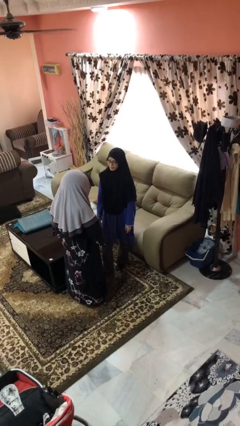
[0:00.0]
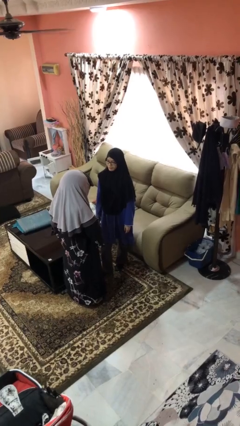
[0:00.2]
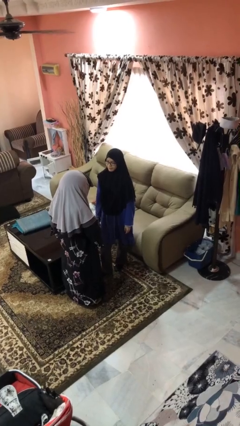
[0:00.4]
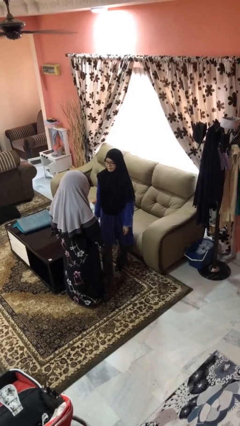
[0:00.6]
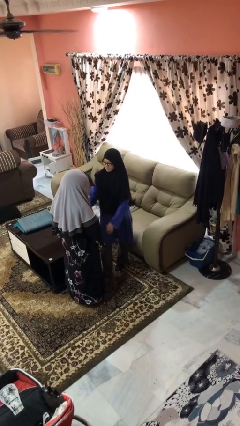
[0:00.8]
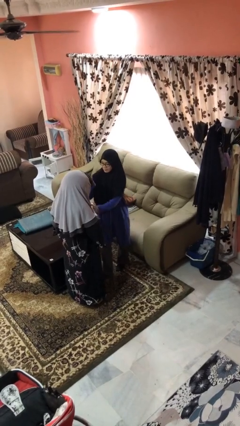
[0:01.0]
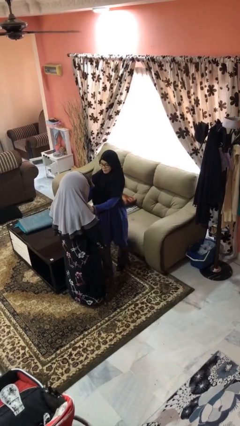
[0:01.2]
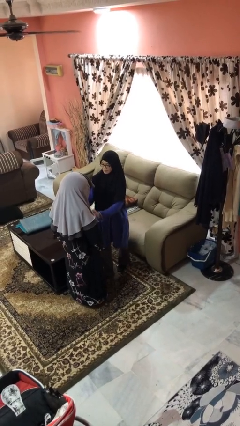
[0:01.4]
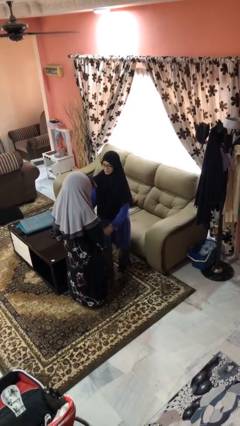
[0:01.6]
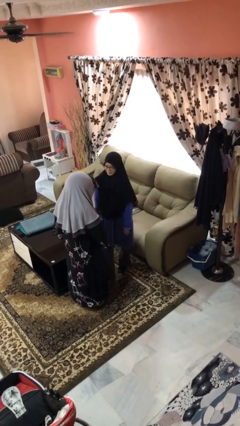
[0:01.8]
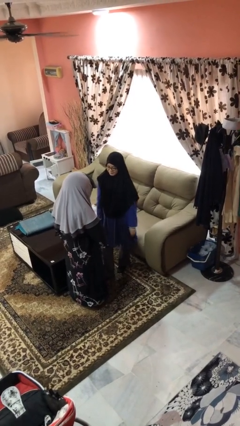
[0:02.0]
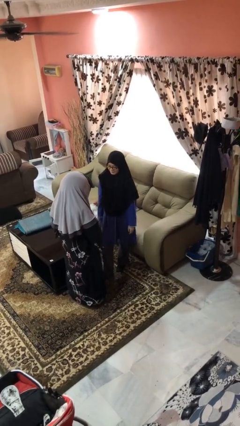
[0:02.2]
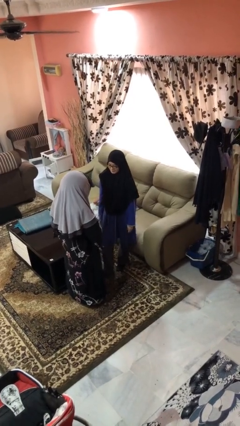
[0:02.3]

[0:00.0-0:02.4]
person shoves person

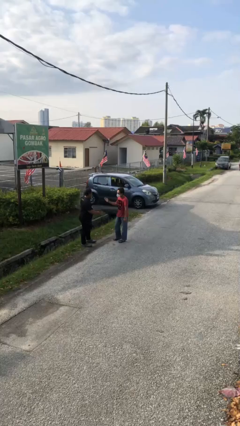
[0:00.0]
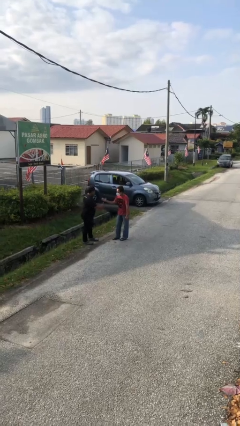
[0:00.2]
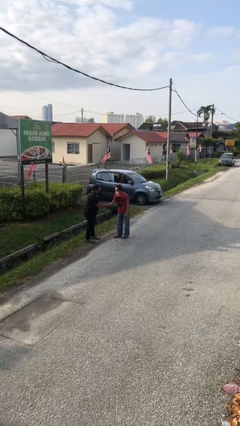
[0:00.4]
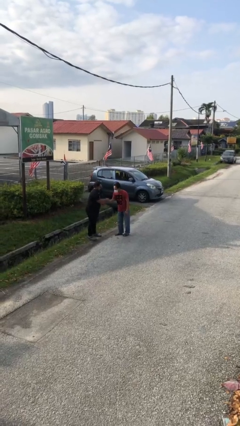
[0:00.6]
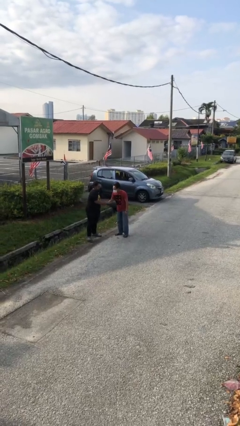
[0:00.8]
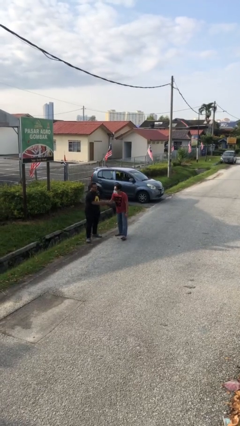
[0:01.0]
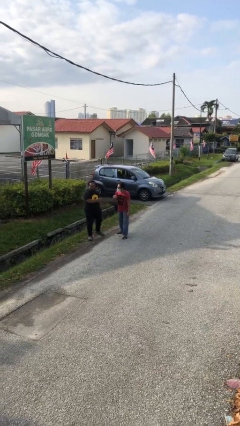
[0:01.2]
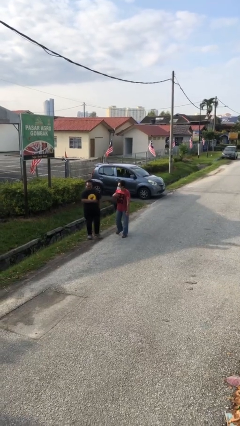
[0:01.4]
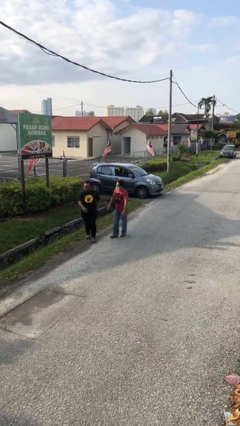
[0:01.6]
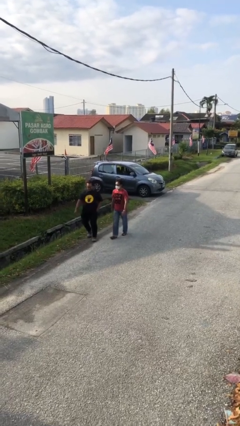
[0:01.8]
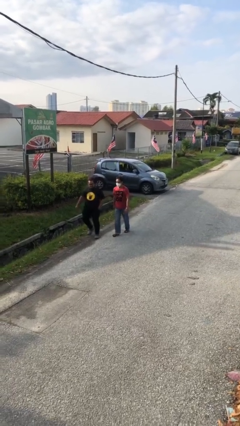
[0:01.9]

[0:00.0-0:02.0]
person shakes hand

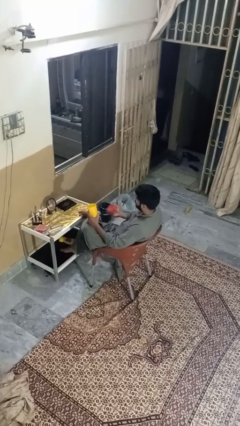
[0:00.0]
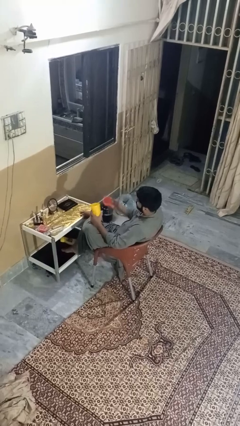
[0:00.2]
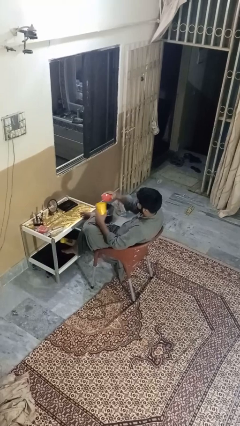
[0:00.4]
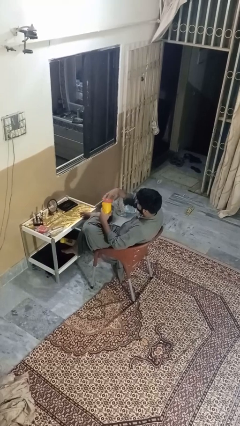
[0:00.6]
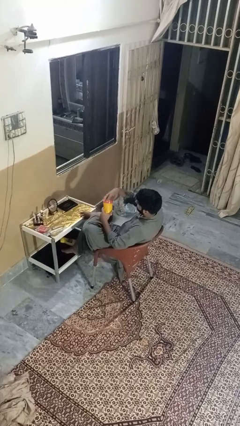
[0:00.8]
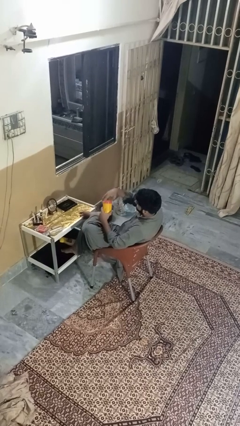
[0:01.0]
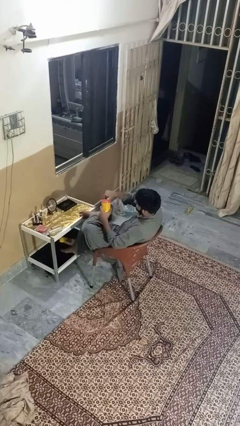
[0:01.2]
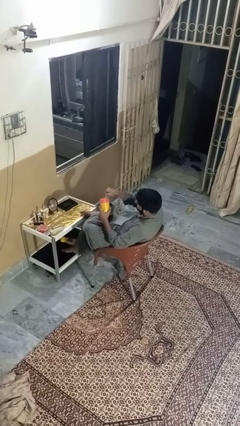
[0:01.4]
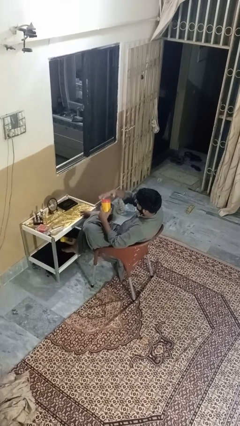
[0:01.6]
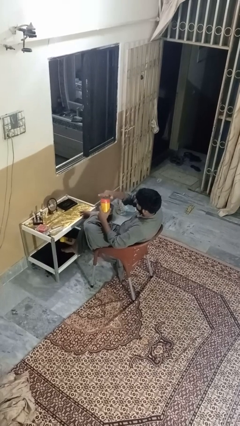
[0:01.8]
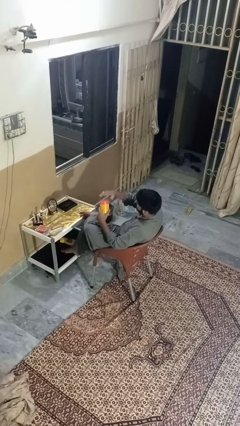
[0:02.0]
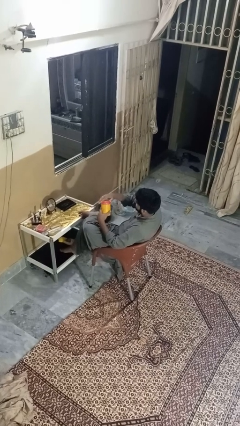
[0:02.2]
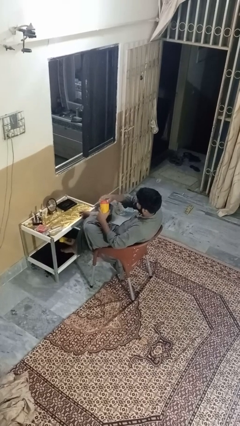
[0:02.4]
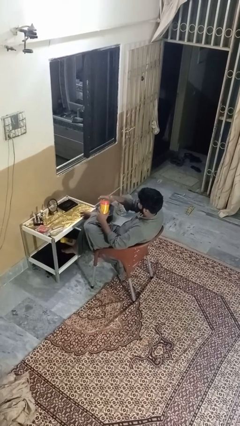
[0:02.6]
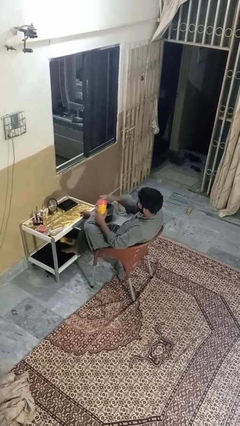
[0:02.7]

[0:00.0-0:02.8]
person closes jar

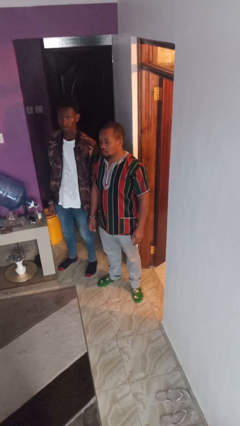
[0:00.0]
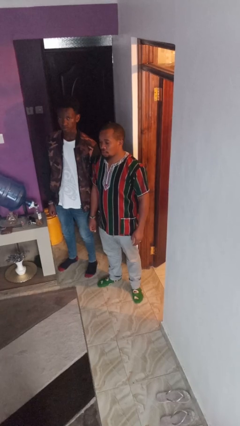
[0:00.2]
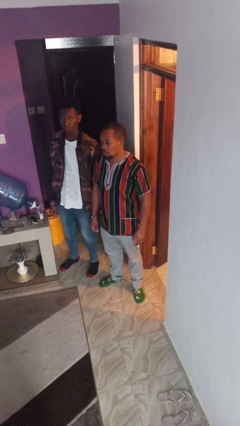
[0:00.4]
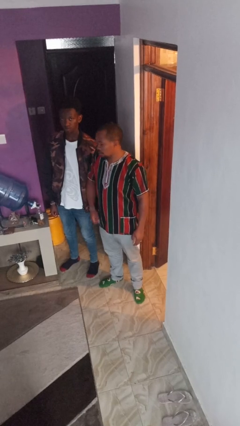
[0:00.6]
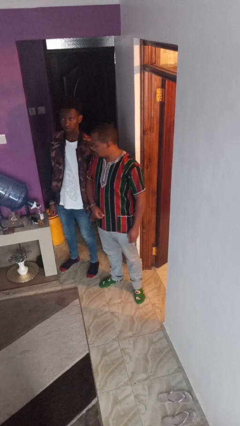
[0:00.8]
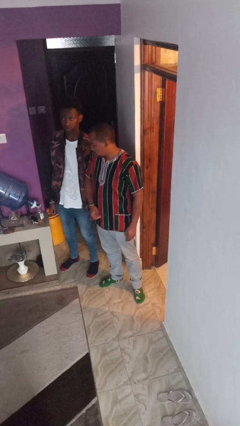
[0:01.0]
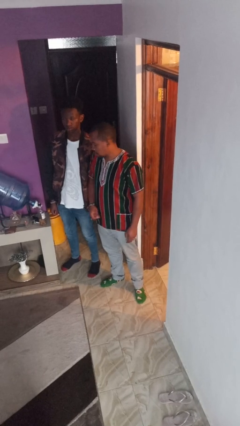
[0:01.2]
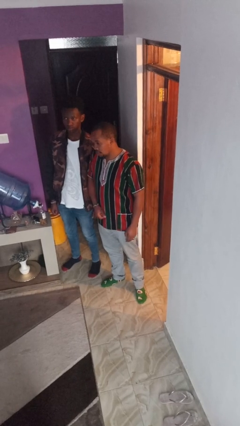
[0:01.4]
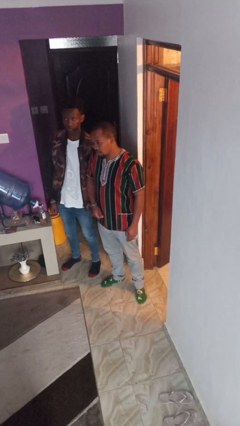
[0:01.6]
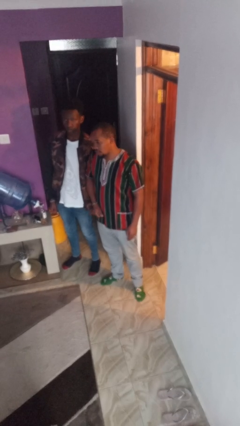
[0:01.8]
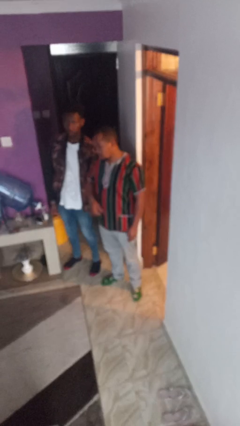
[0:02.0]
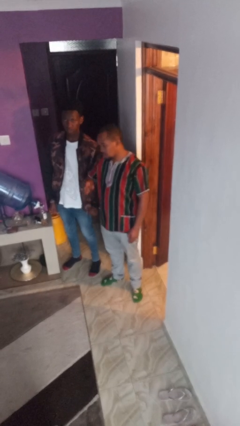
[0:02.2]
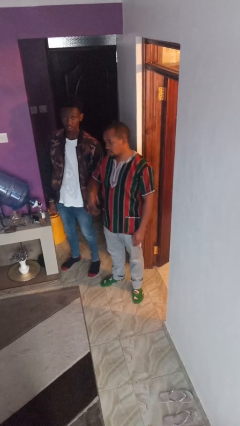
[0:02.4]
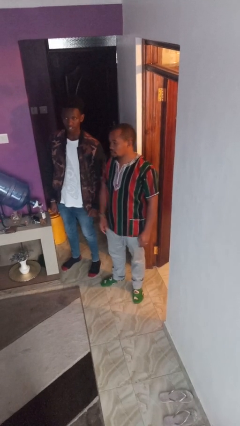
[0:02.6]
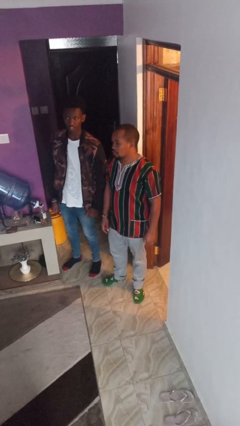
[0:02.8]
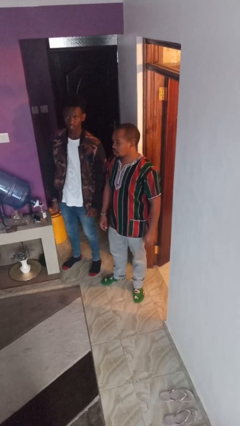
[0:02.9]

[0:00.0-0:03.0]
person nudges person with elbow

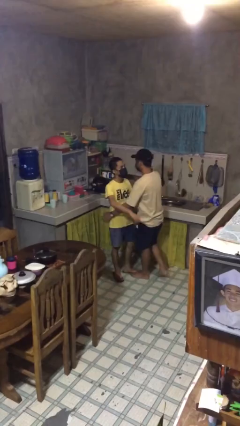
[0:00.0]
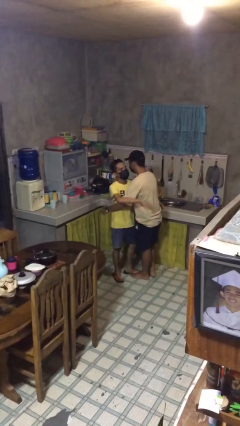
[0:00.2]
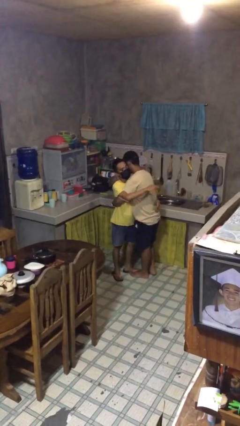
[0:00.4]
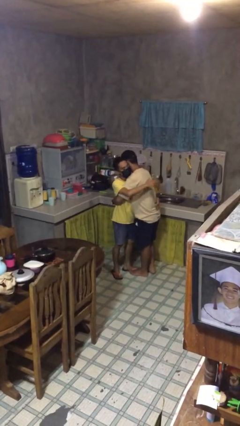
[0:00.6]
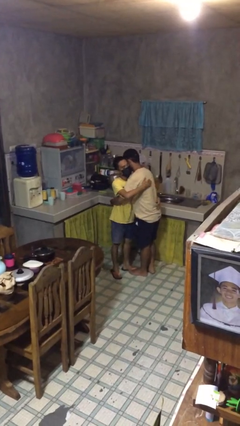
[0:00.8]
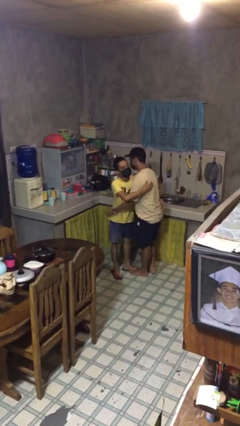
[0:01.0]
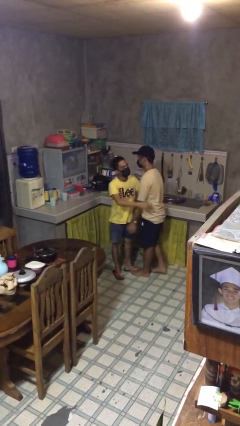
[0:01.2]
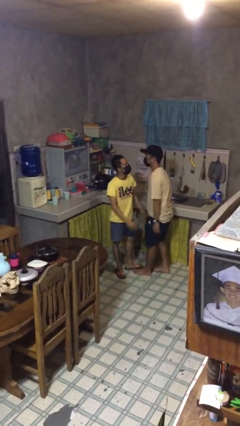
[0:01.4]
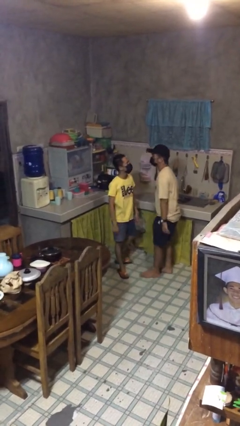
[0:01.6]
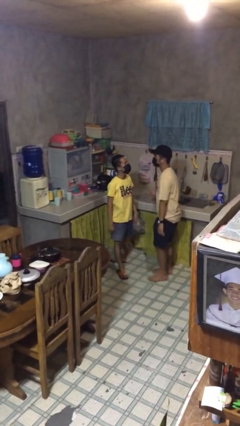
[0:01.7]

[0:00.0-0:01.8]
person embraces person

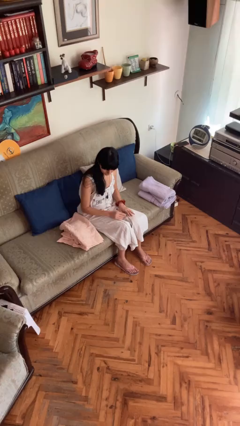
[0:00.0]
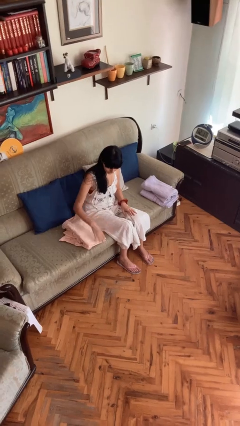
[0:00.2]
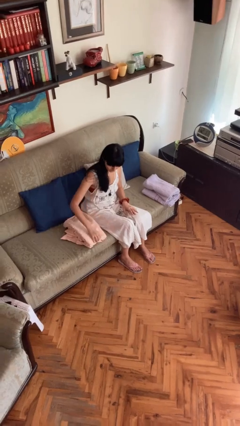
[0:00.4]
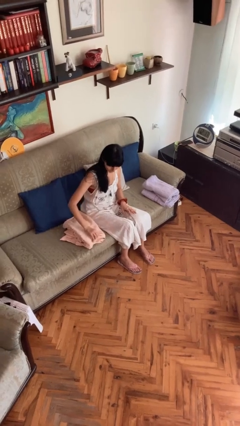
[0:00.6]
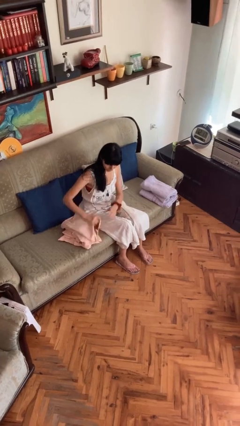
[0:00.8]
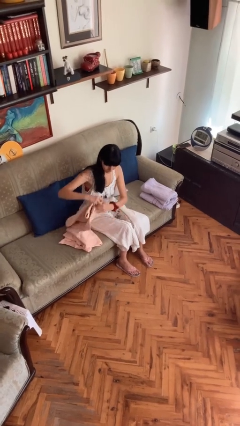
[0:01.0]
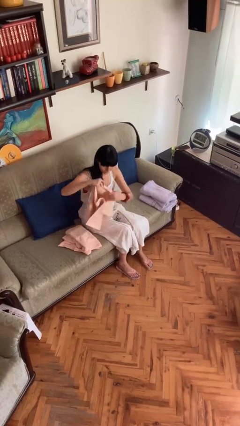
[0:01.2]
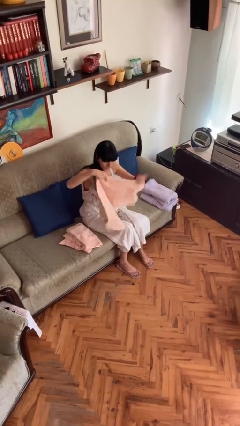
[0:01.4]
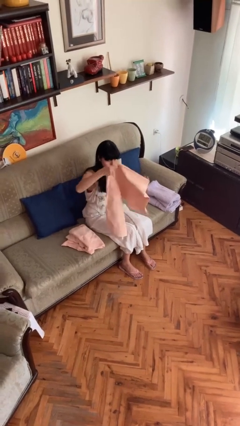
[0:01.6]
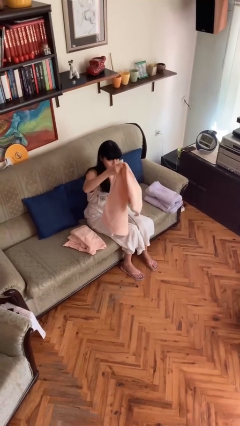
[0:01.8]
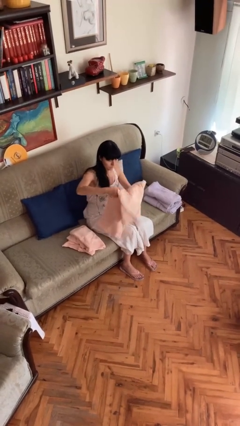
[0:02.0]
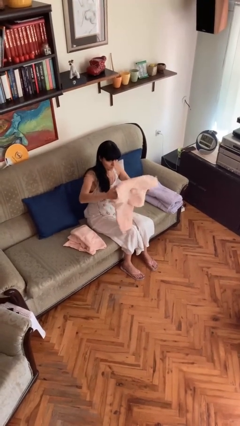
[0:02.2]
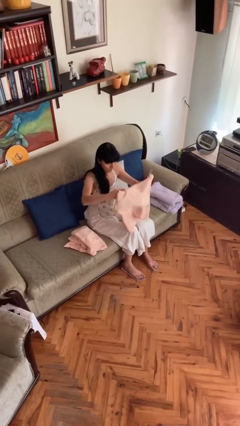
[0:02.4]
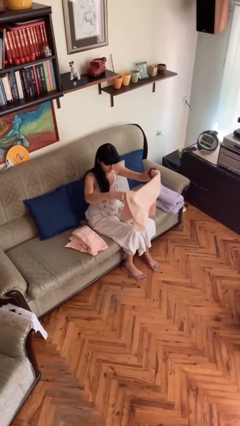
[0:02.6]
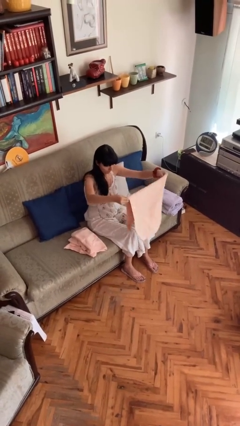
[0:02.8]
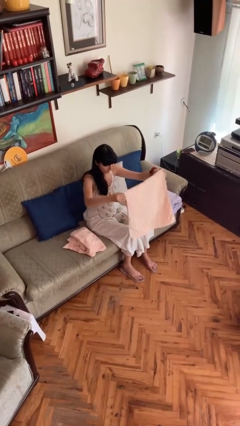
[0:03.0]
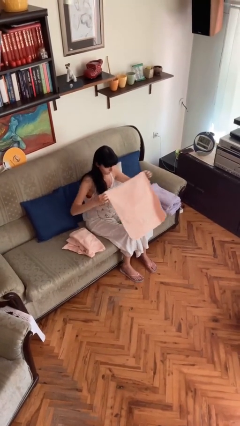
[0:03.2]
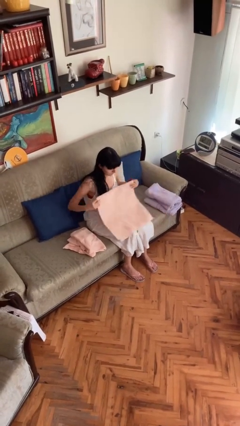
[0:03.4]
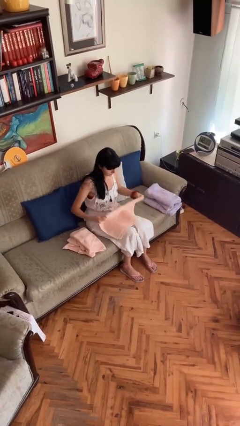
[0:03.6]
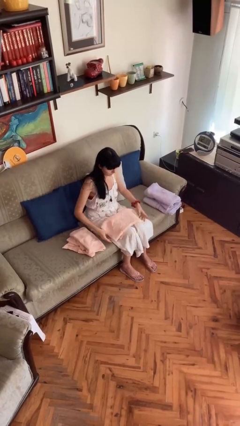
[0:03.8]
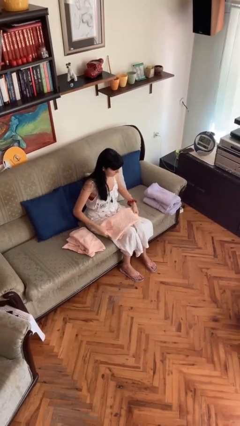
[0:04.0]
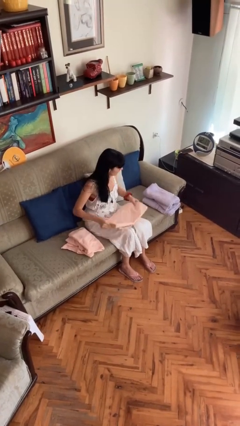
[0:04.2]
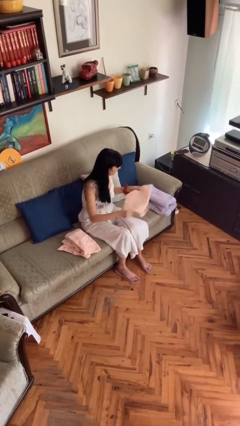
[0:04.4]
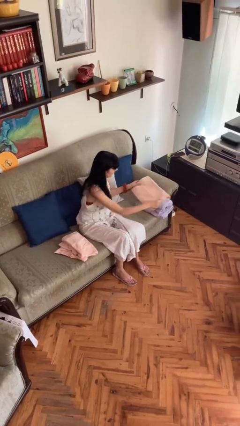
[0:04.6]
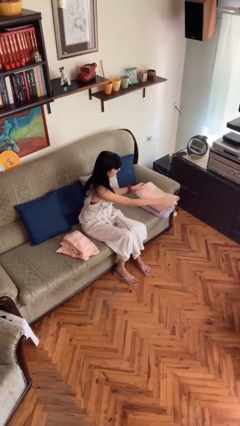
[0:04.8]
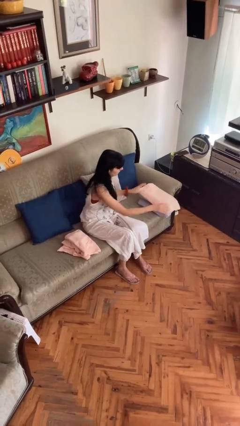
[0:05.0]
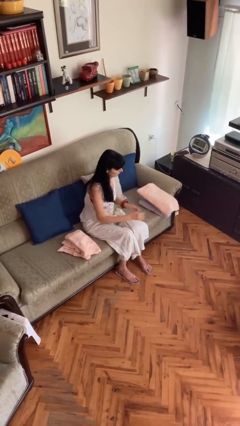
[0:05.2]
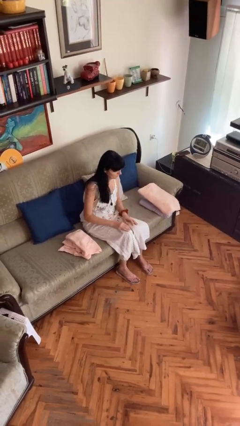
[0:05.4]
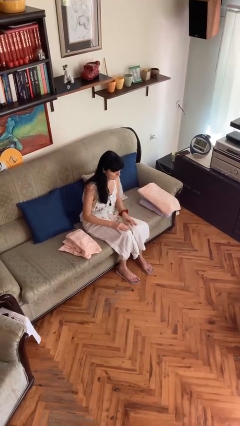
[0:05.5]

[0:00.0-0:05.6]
person folds towel
